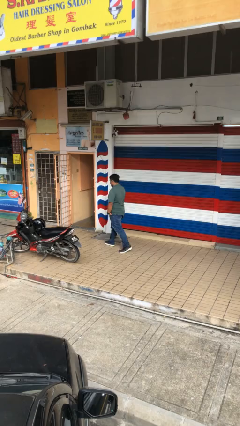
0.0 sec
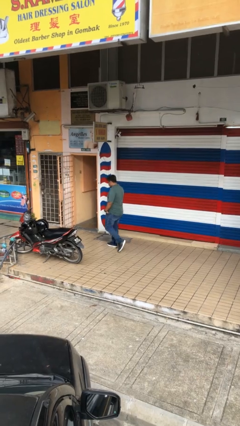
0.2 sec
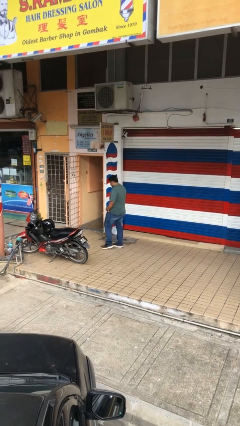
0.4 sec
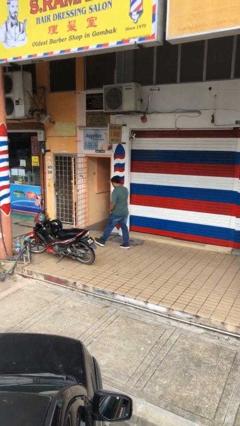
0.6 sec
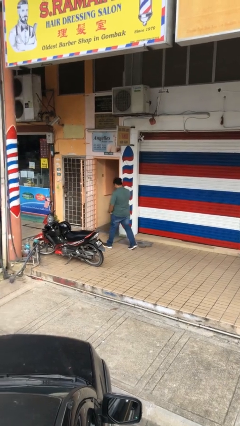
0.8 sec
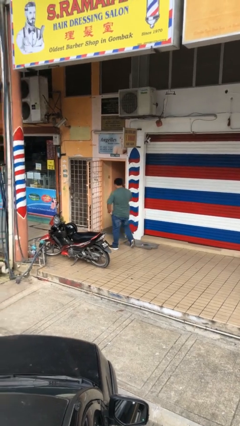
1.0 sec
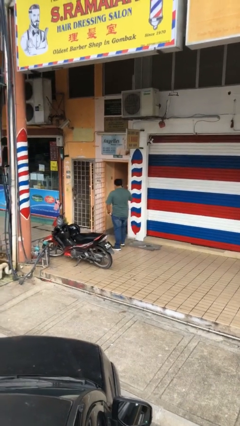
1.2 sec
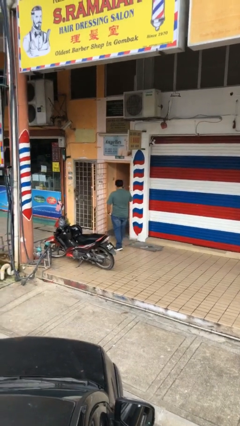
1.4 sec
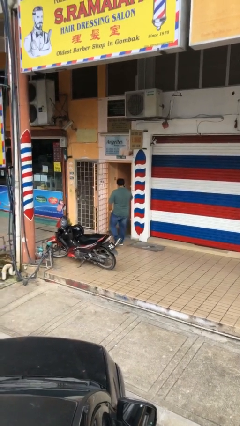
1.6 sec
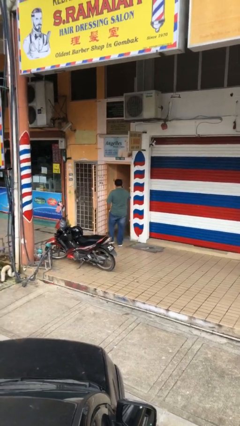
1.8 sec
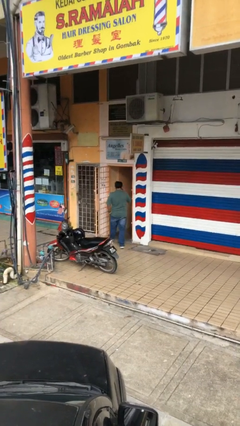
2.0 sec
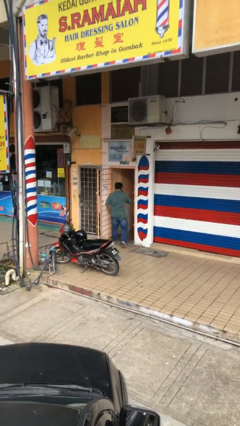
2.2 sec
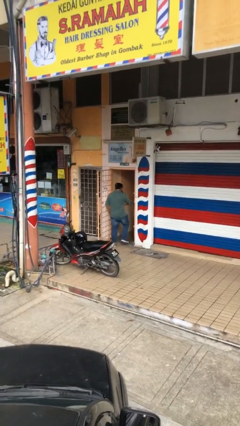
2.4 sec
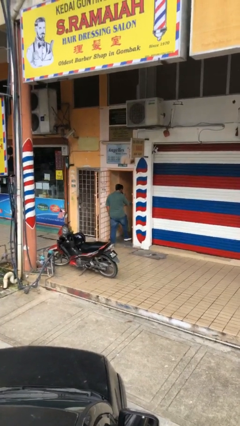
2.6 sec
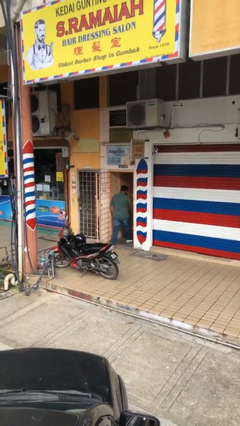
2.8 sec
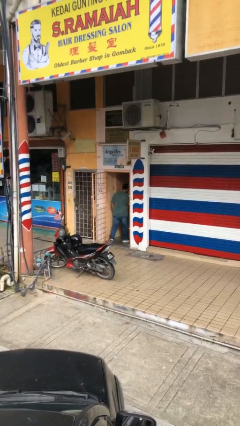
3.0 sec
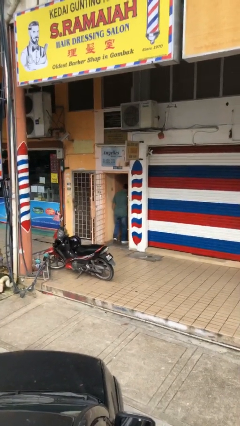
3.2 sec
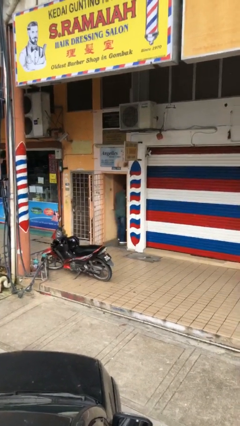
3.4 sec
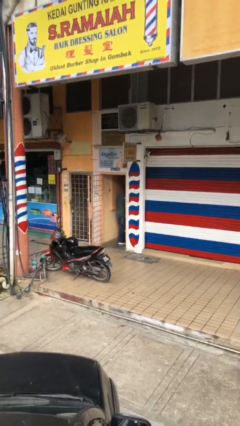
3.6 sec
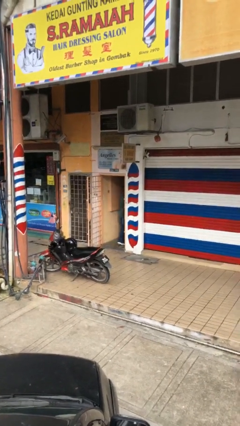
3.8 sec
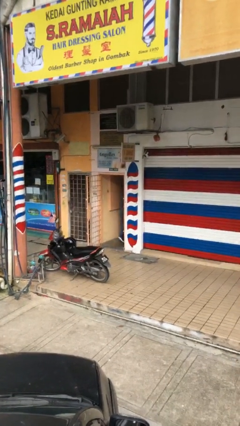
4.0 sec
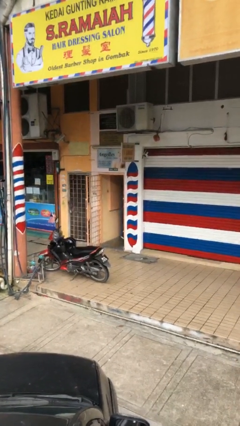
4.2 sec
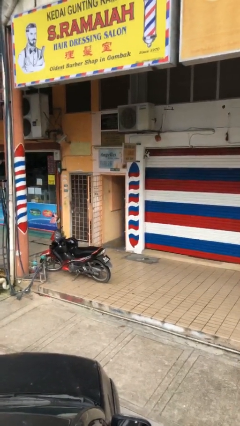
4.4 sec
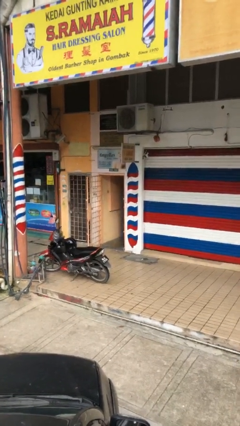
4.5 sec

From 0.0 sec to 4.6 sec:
person exits scene through structure

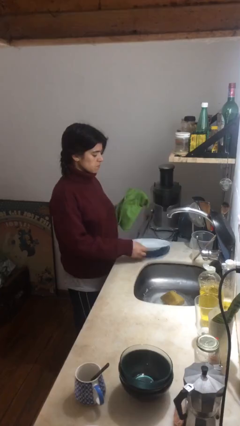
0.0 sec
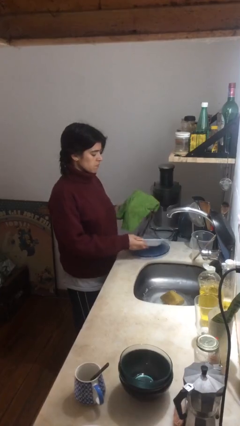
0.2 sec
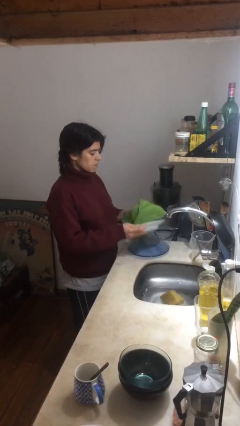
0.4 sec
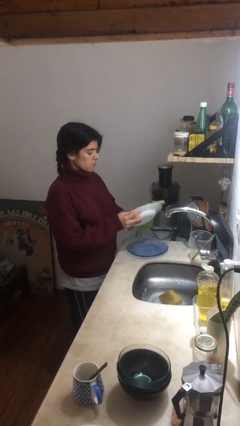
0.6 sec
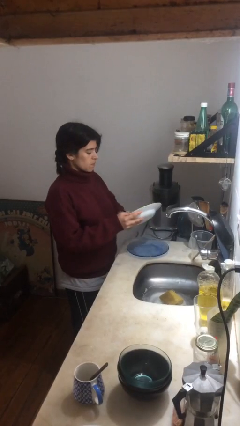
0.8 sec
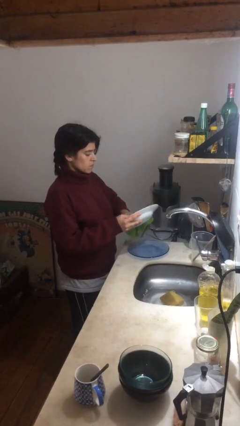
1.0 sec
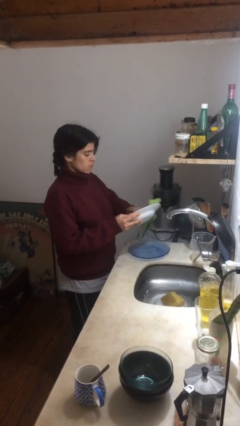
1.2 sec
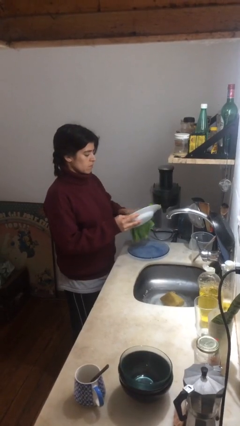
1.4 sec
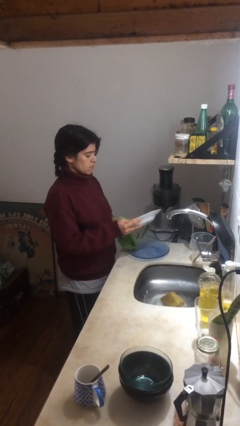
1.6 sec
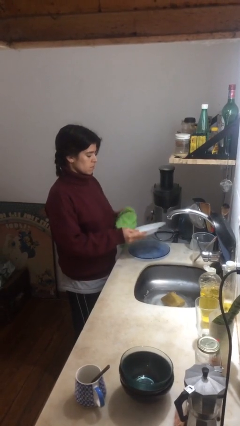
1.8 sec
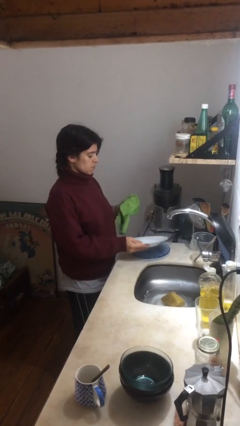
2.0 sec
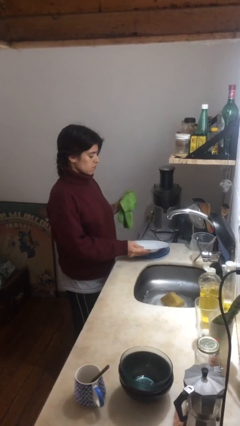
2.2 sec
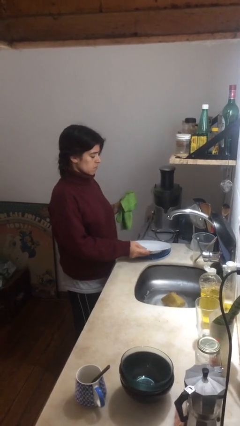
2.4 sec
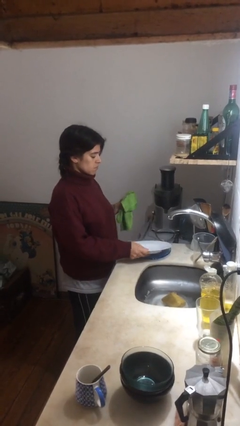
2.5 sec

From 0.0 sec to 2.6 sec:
person dries dish

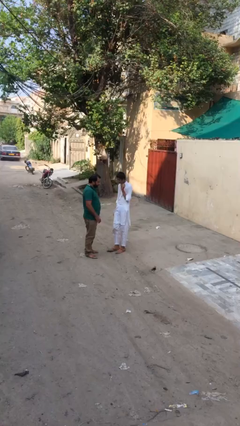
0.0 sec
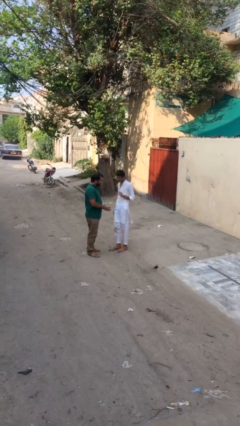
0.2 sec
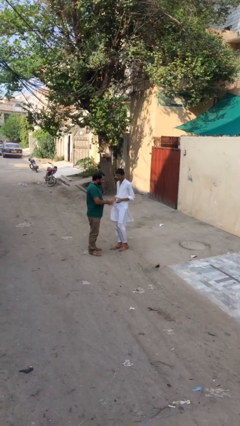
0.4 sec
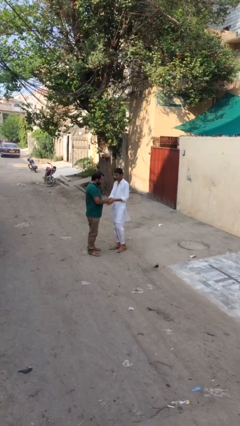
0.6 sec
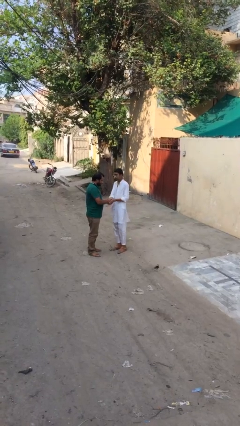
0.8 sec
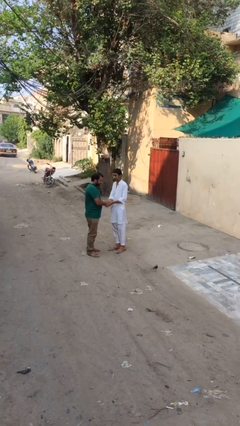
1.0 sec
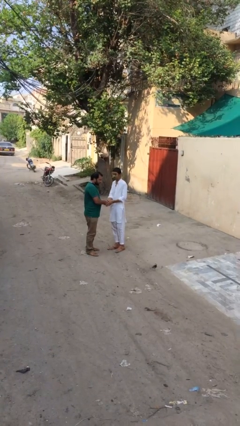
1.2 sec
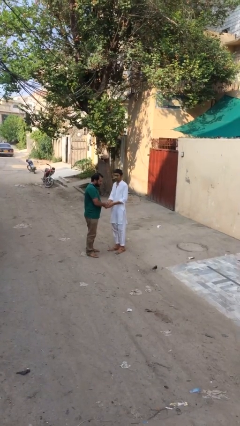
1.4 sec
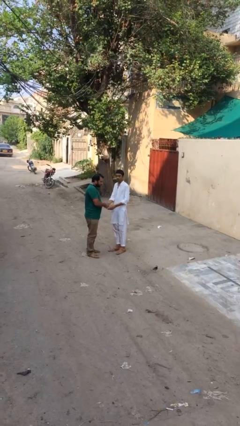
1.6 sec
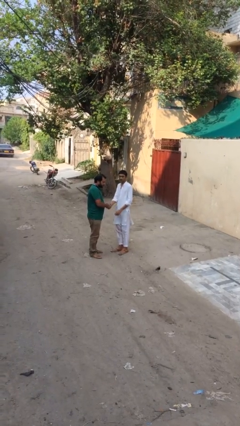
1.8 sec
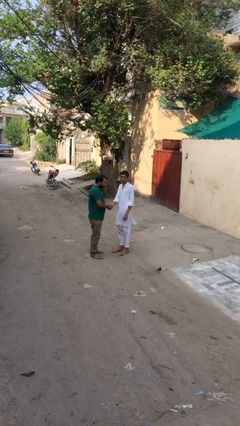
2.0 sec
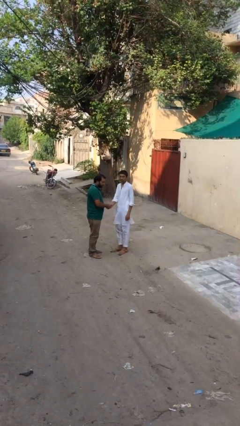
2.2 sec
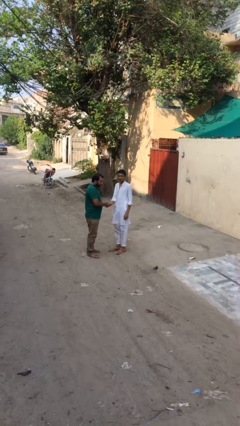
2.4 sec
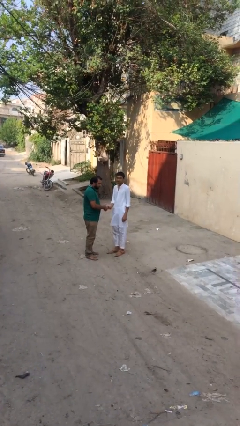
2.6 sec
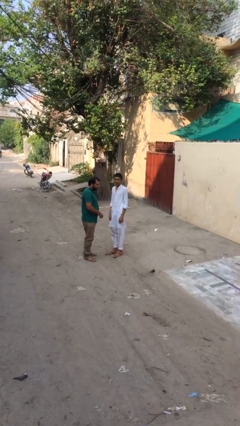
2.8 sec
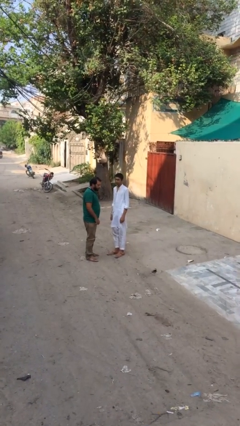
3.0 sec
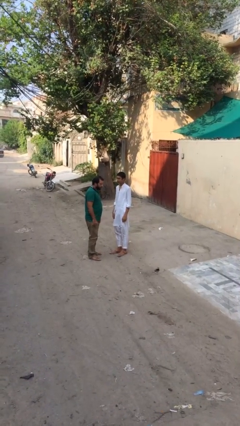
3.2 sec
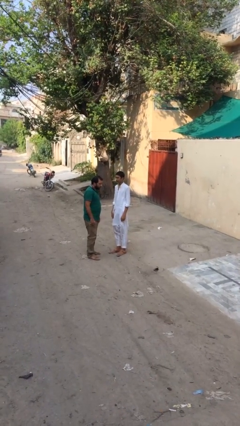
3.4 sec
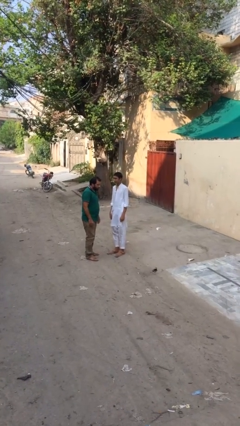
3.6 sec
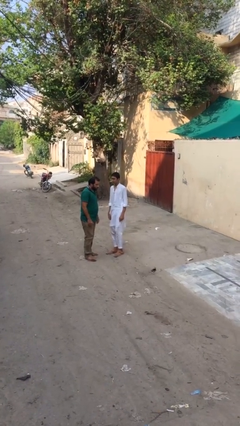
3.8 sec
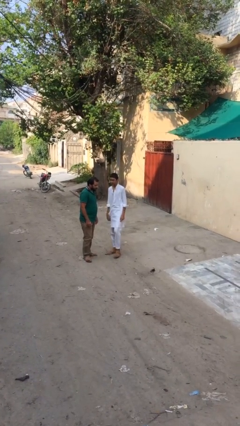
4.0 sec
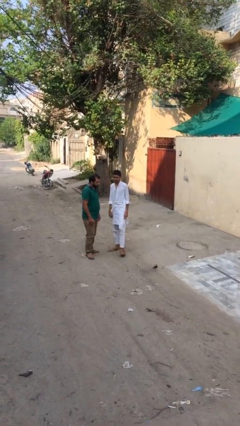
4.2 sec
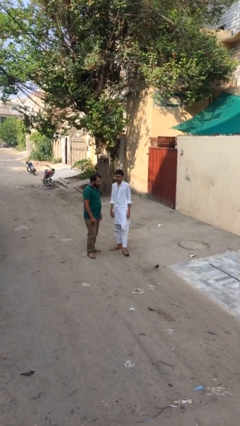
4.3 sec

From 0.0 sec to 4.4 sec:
person shakes hand

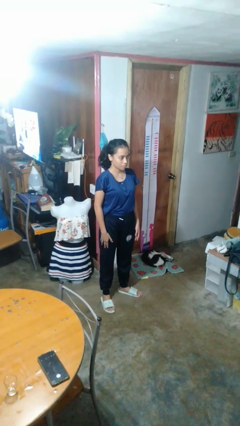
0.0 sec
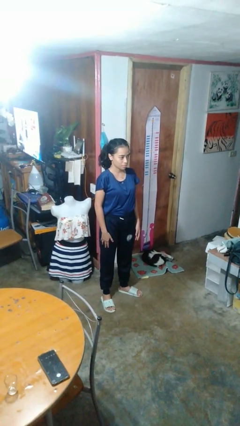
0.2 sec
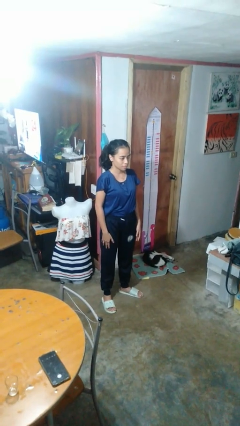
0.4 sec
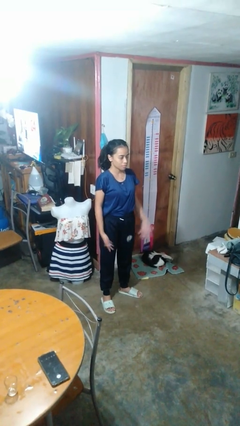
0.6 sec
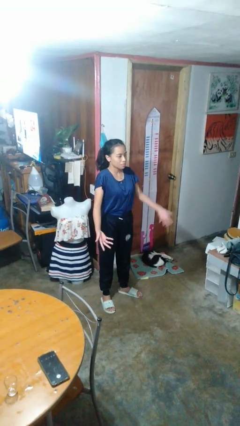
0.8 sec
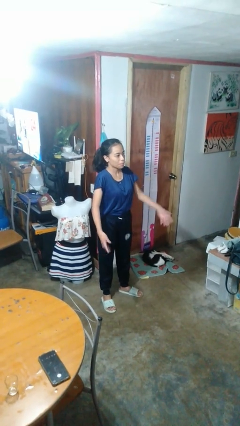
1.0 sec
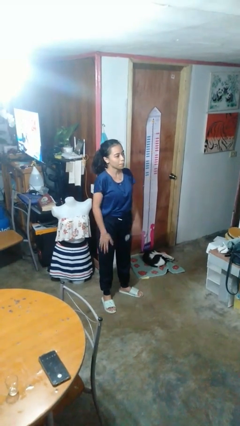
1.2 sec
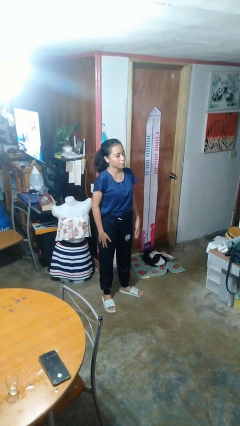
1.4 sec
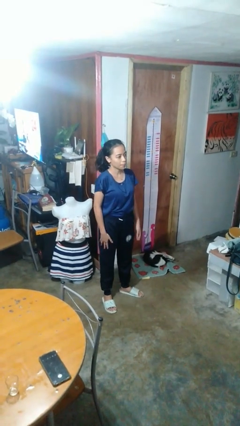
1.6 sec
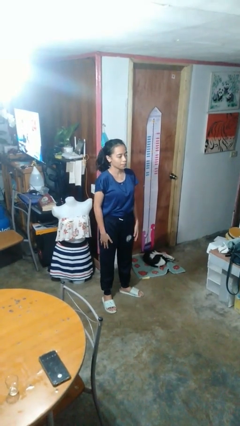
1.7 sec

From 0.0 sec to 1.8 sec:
person slaps hands on thighs

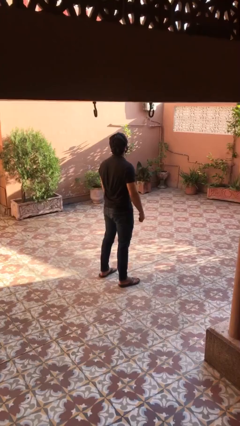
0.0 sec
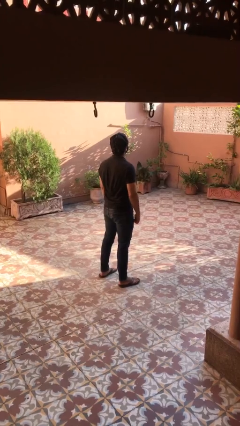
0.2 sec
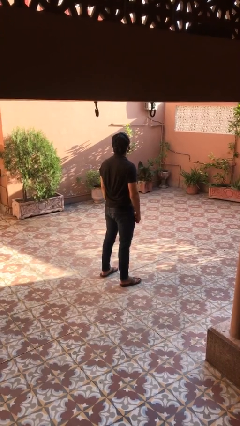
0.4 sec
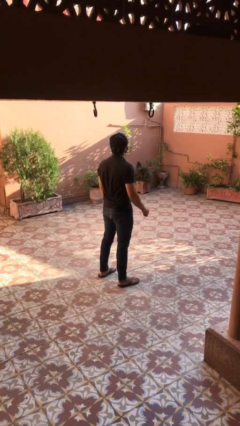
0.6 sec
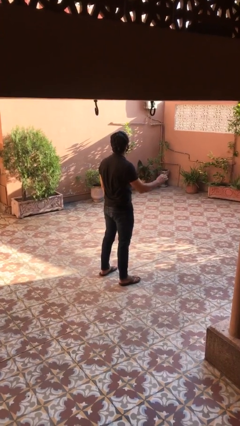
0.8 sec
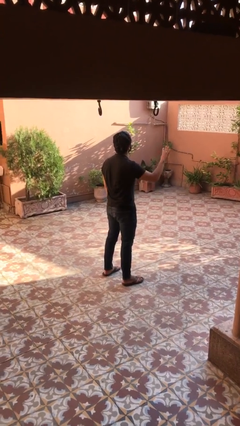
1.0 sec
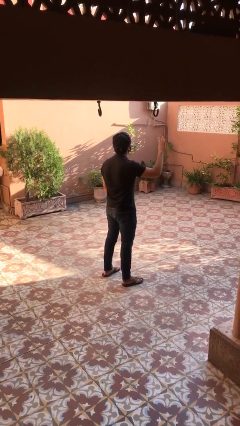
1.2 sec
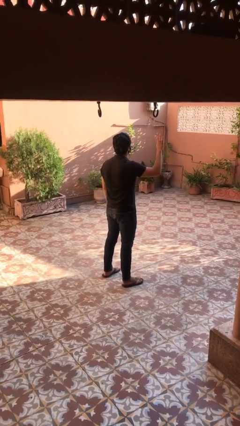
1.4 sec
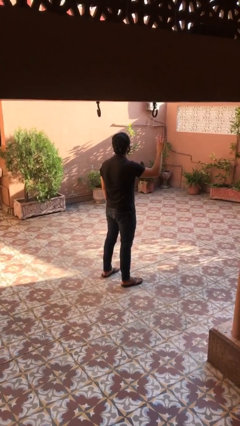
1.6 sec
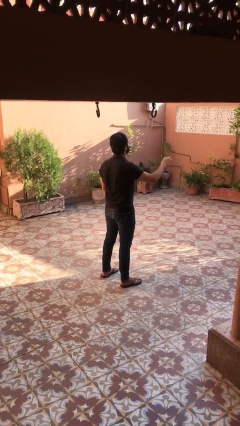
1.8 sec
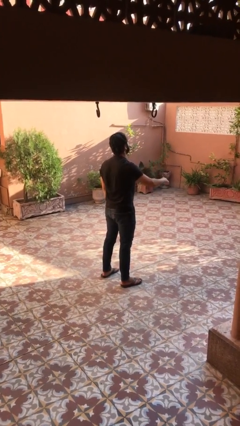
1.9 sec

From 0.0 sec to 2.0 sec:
person gestures number four

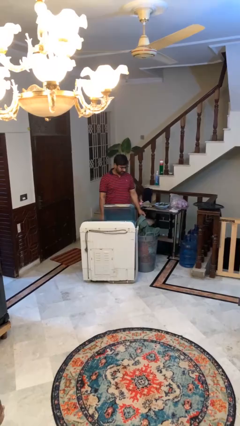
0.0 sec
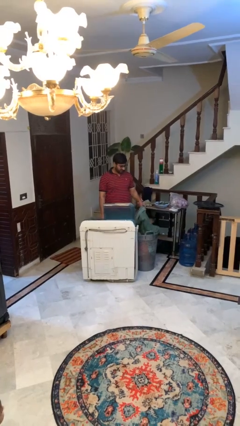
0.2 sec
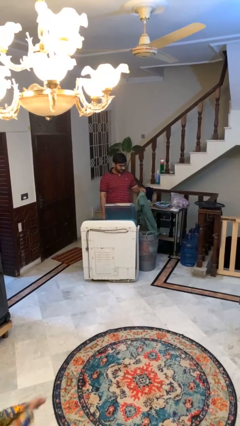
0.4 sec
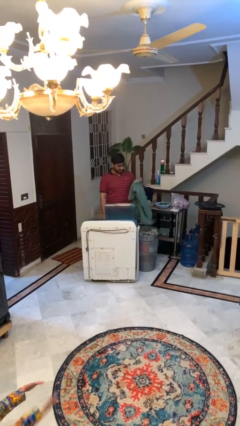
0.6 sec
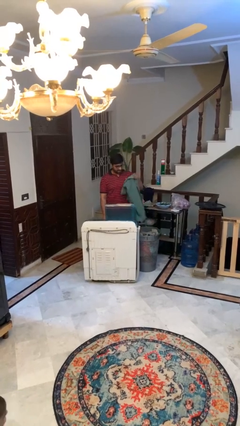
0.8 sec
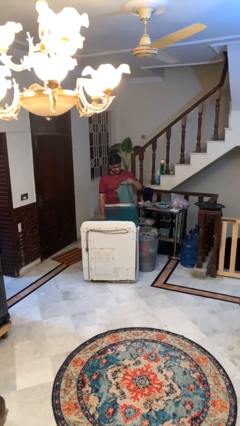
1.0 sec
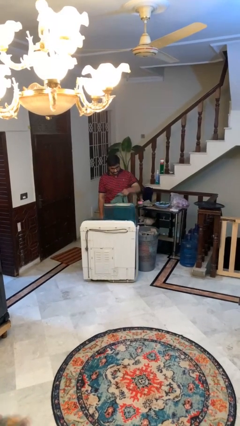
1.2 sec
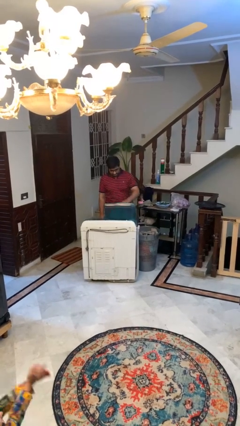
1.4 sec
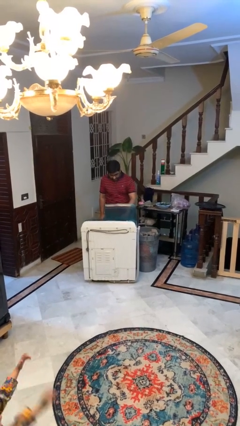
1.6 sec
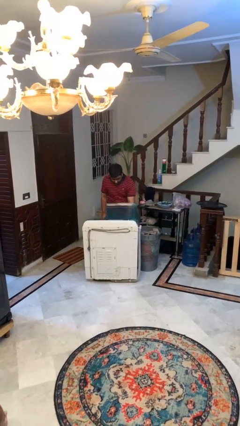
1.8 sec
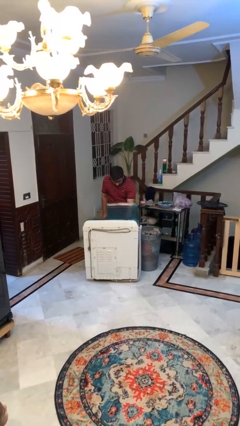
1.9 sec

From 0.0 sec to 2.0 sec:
person loads clotheswasher

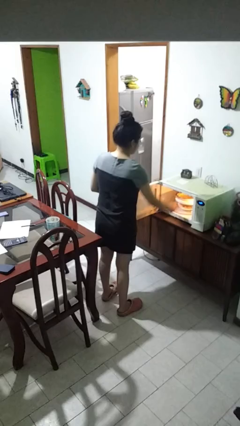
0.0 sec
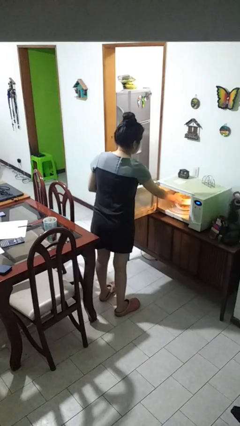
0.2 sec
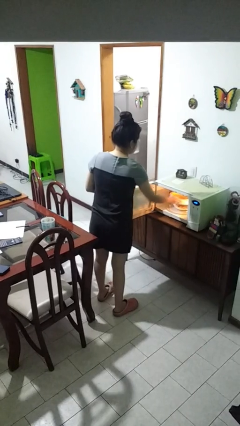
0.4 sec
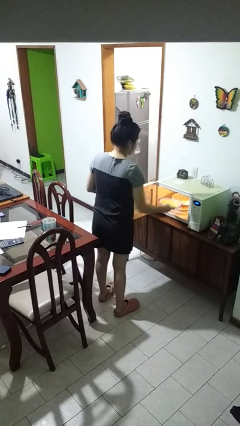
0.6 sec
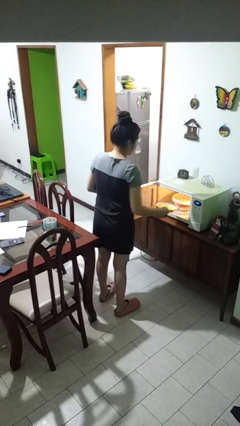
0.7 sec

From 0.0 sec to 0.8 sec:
person takes object from microwave
